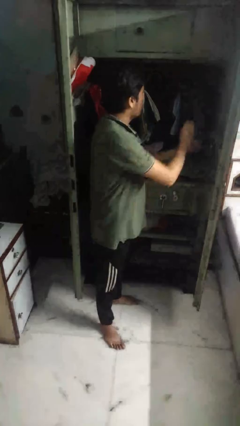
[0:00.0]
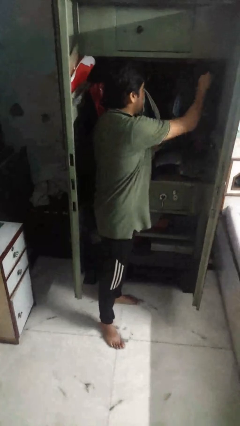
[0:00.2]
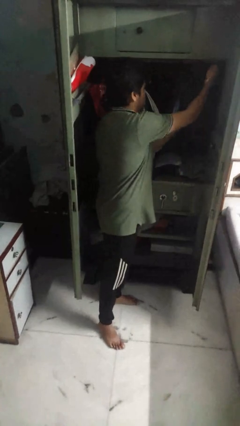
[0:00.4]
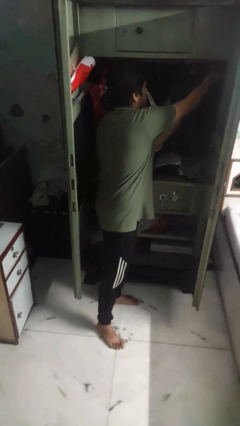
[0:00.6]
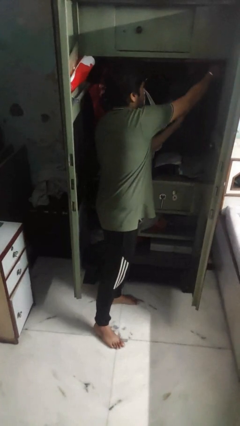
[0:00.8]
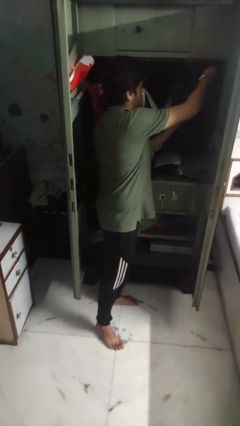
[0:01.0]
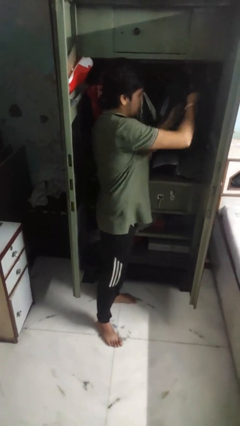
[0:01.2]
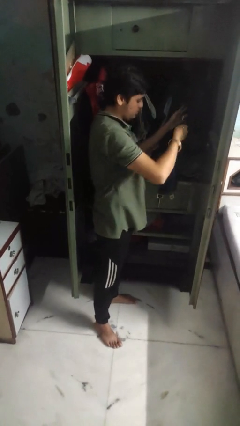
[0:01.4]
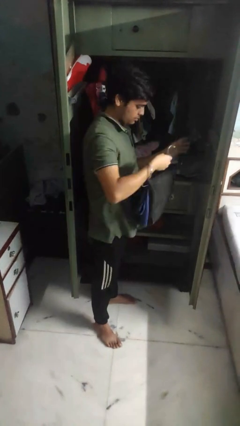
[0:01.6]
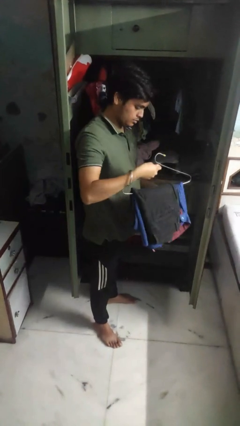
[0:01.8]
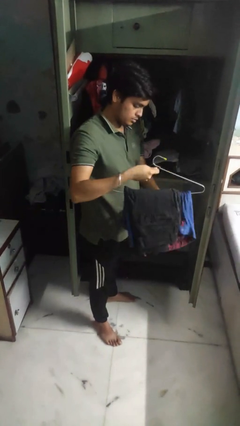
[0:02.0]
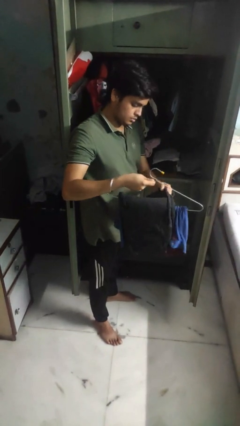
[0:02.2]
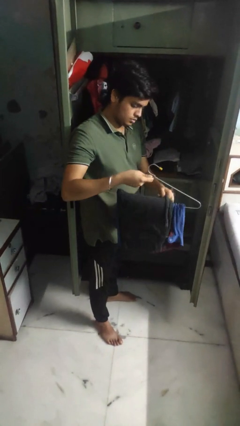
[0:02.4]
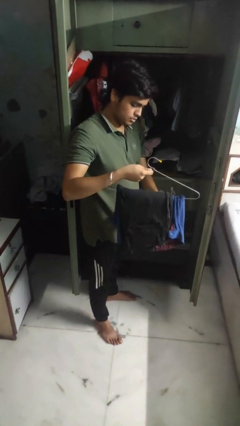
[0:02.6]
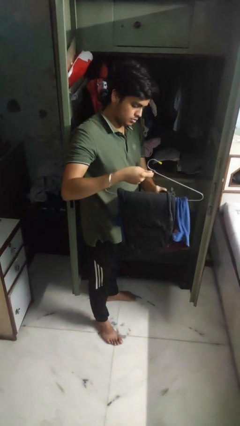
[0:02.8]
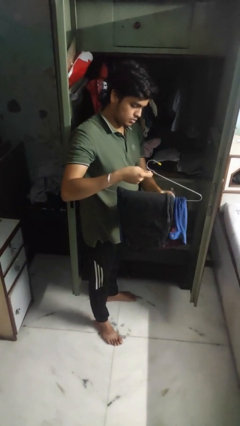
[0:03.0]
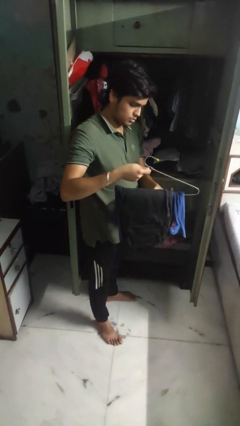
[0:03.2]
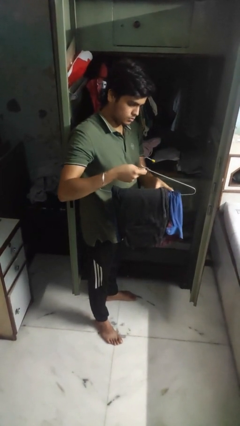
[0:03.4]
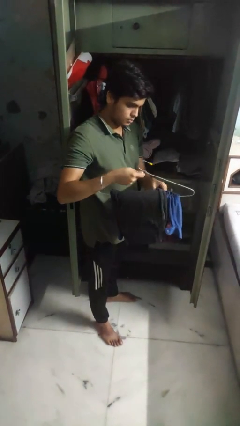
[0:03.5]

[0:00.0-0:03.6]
person takes clothes from closet

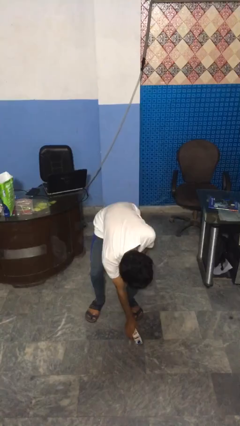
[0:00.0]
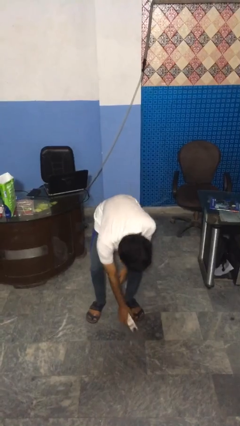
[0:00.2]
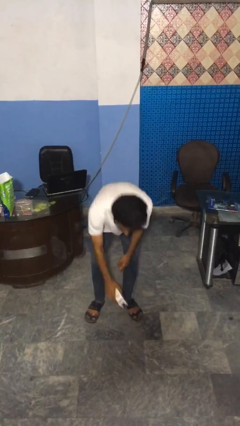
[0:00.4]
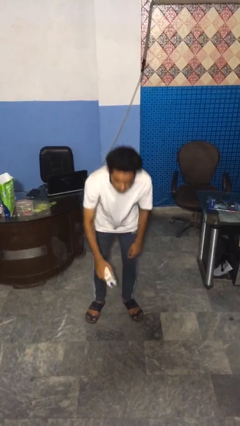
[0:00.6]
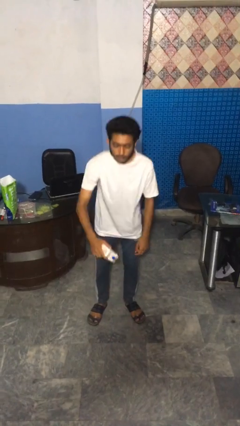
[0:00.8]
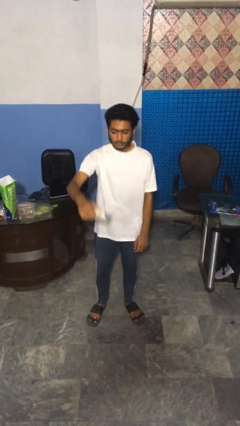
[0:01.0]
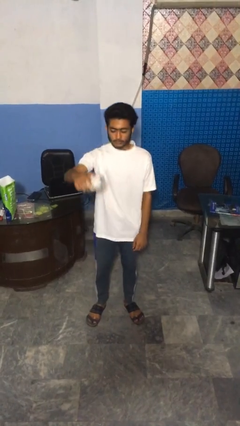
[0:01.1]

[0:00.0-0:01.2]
person picks up object from floor

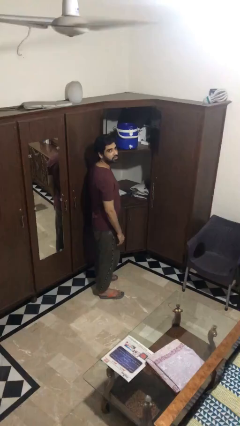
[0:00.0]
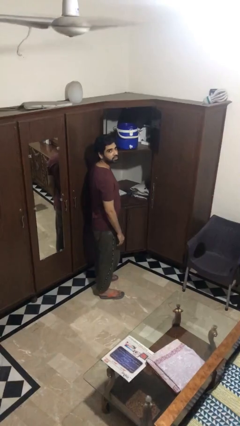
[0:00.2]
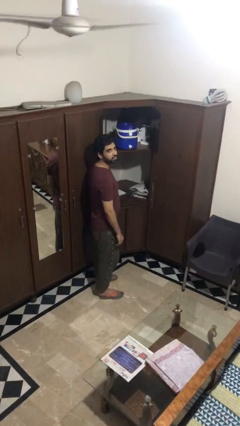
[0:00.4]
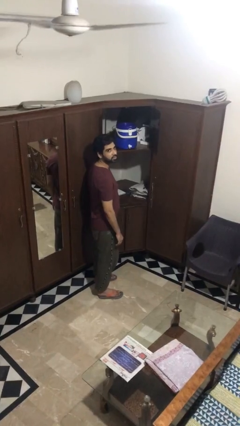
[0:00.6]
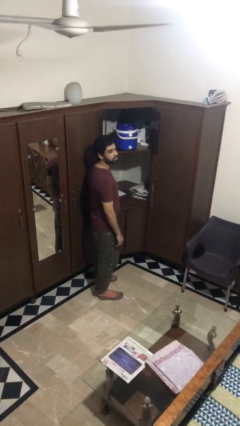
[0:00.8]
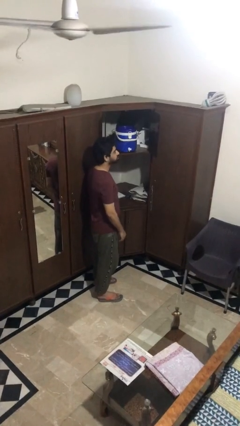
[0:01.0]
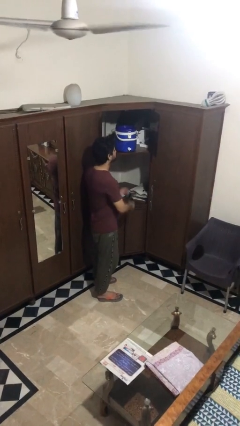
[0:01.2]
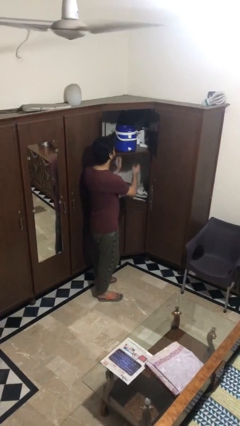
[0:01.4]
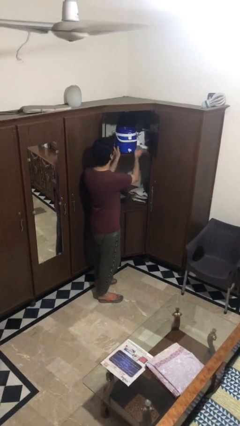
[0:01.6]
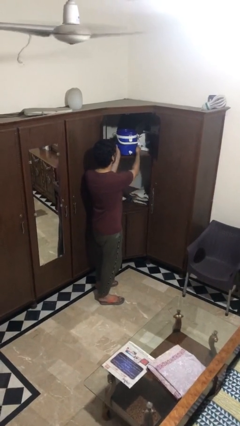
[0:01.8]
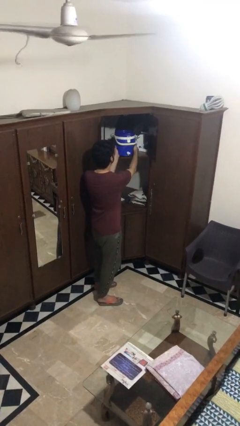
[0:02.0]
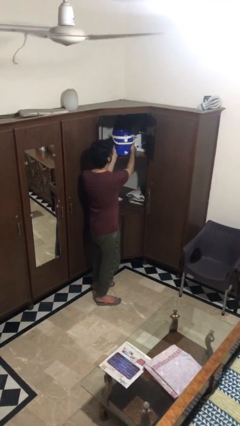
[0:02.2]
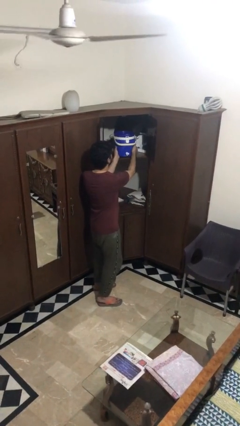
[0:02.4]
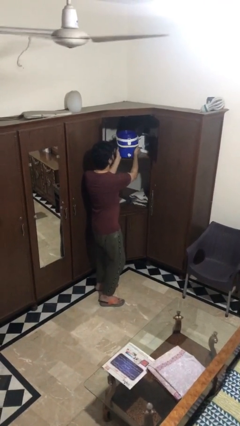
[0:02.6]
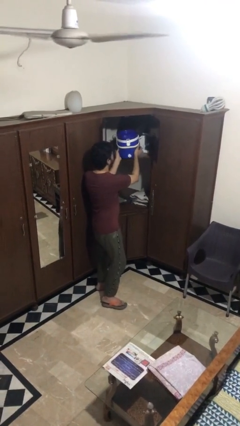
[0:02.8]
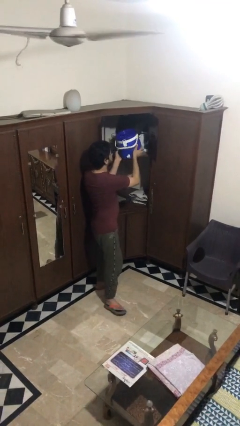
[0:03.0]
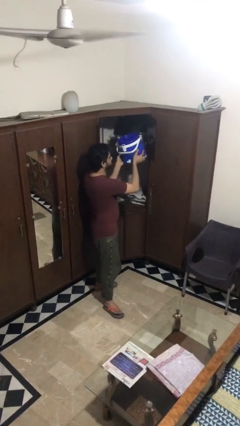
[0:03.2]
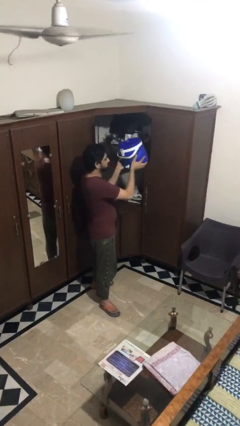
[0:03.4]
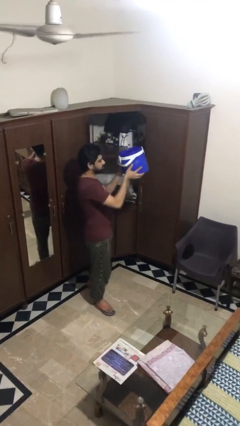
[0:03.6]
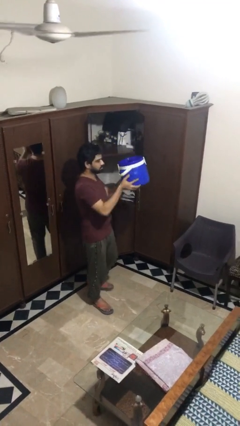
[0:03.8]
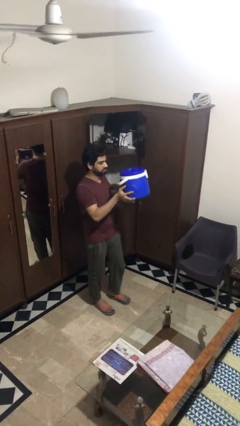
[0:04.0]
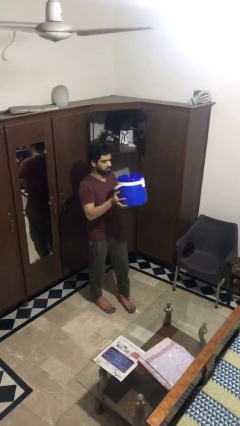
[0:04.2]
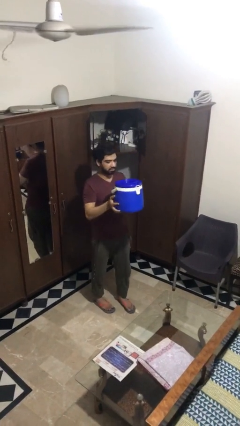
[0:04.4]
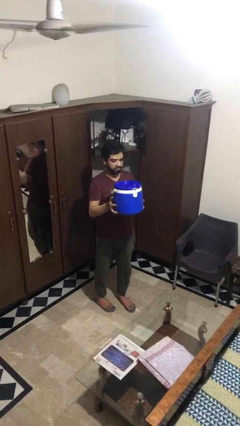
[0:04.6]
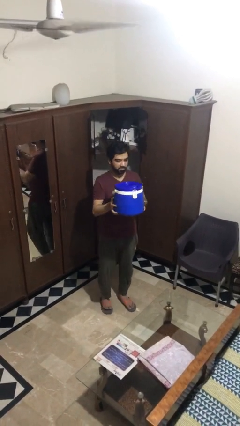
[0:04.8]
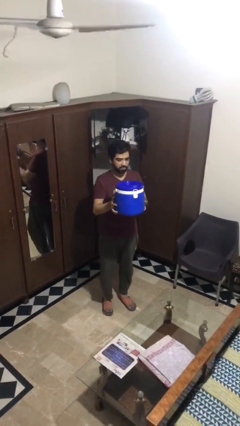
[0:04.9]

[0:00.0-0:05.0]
person picks up object from shelf

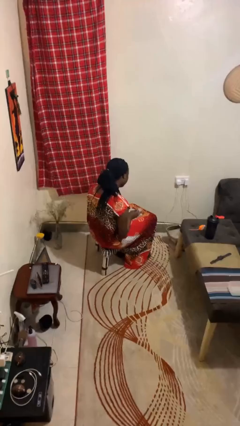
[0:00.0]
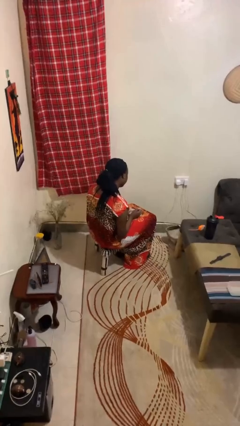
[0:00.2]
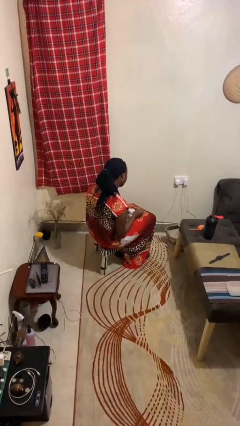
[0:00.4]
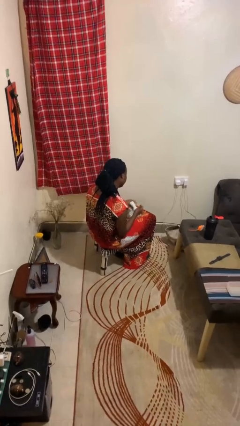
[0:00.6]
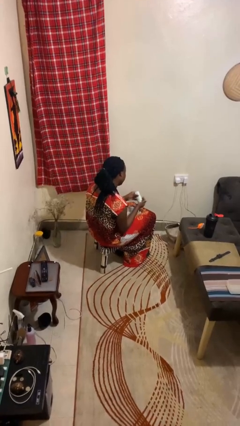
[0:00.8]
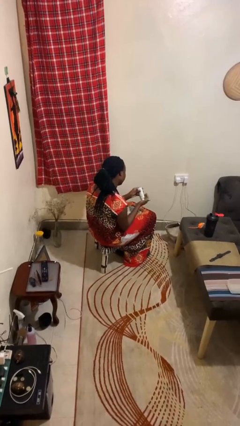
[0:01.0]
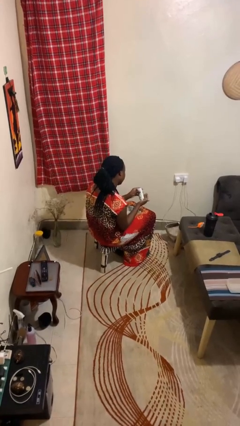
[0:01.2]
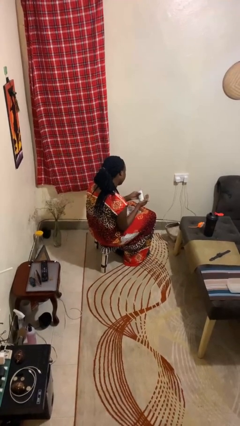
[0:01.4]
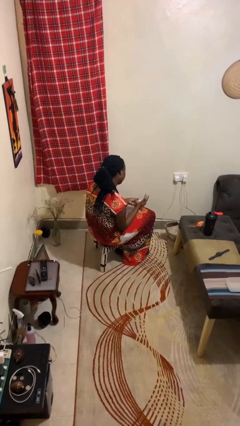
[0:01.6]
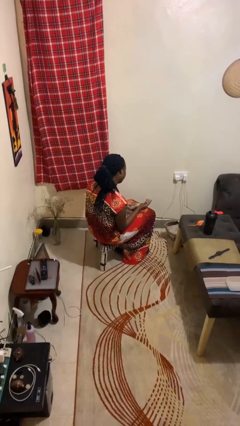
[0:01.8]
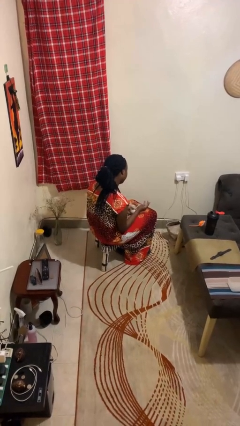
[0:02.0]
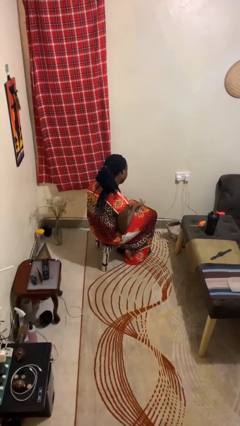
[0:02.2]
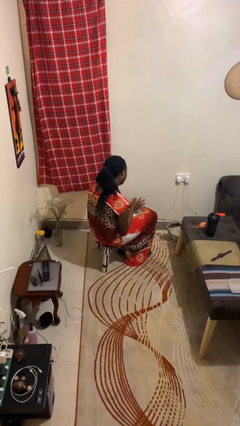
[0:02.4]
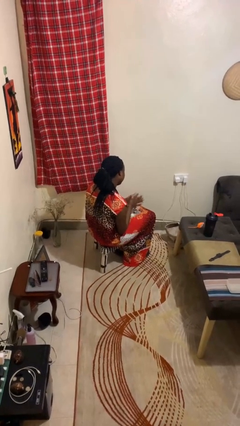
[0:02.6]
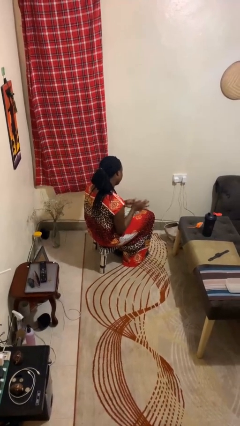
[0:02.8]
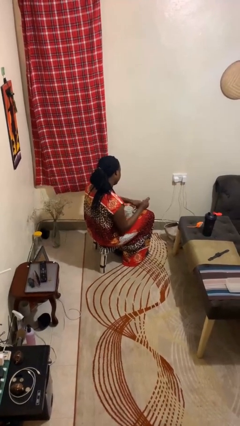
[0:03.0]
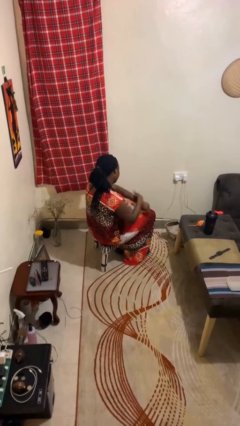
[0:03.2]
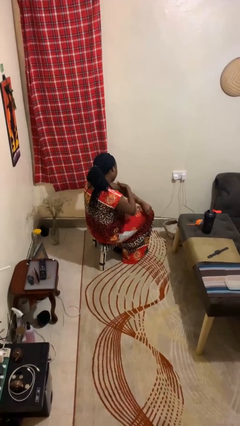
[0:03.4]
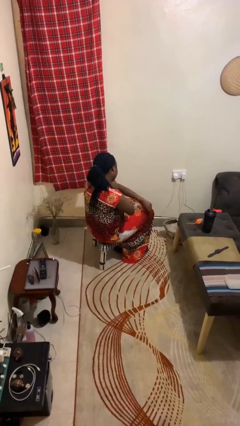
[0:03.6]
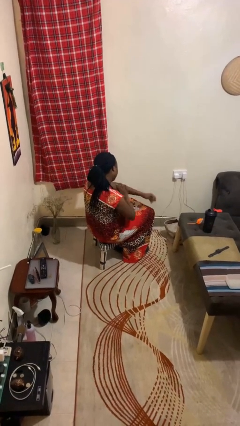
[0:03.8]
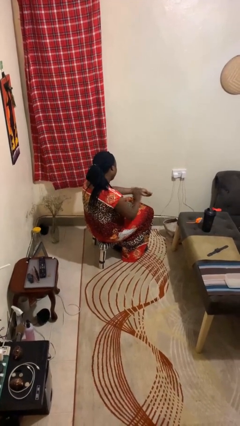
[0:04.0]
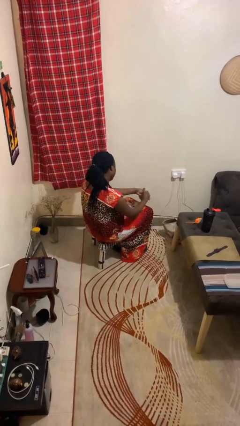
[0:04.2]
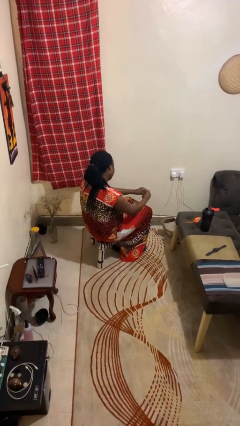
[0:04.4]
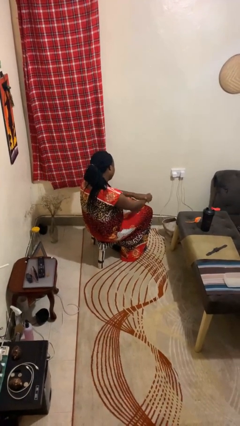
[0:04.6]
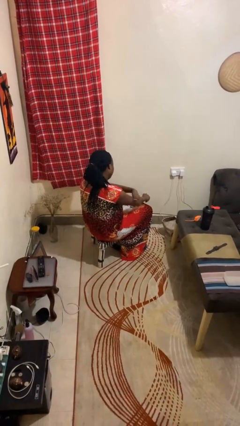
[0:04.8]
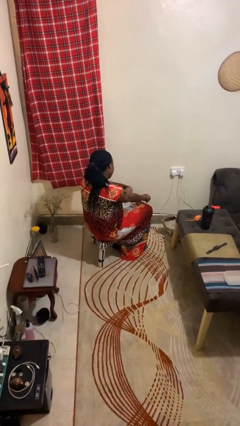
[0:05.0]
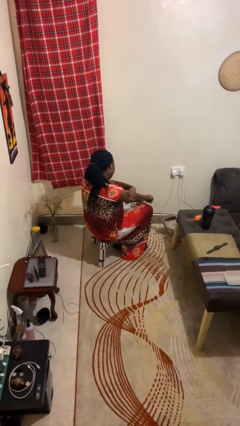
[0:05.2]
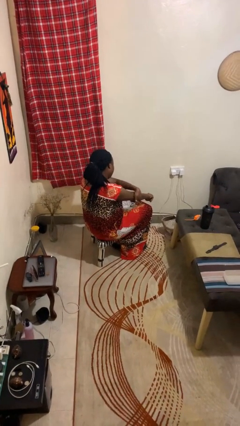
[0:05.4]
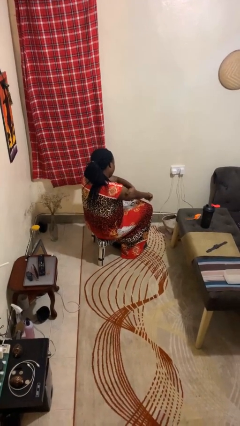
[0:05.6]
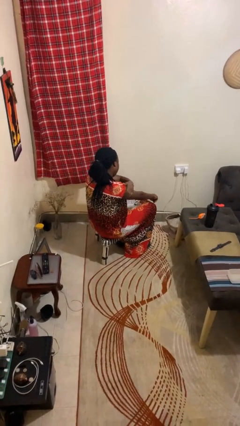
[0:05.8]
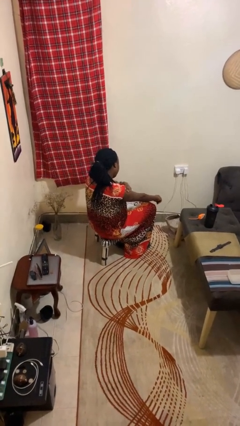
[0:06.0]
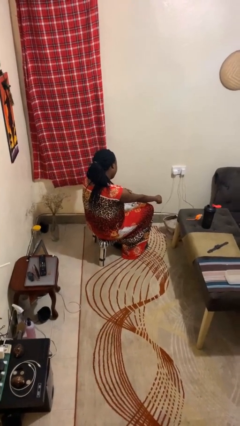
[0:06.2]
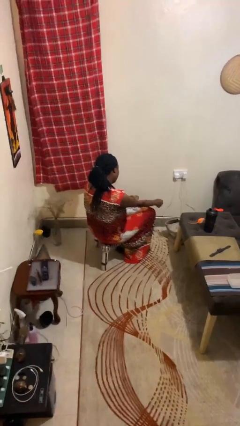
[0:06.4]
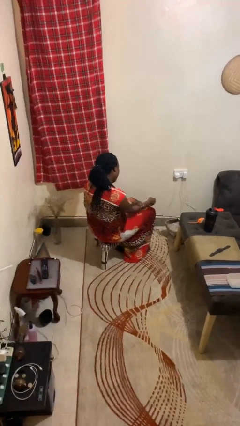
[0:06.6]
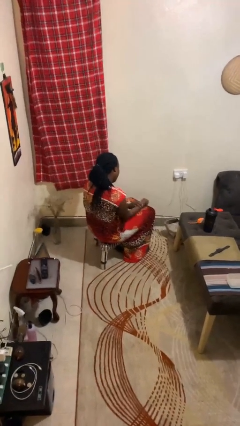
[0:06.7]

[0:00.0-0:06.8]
person applies sunscreen

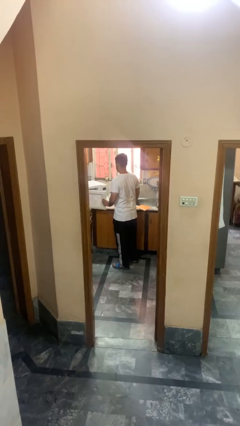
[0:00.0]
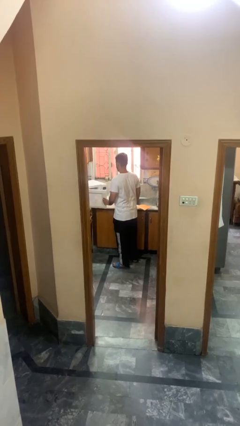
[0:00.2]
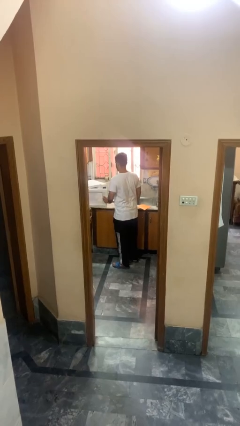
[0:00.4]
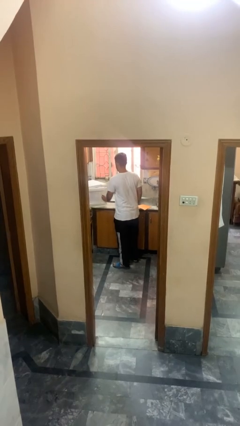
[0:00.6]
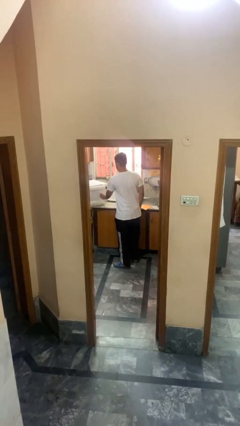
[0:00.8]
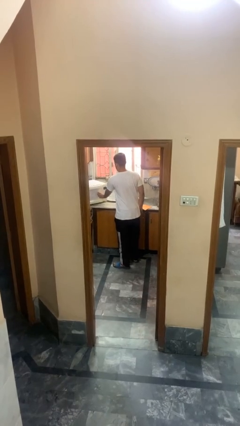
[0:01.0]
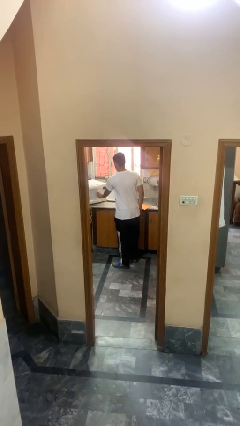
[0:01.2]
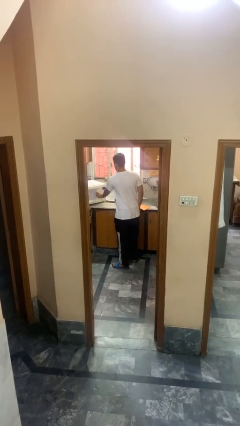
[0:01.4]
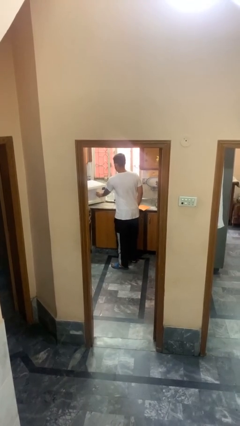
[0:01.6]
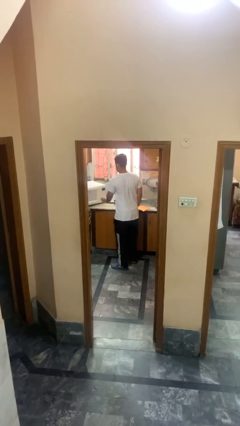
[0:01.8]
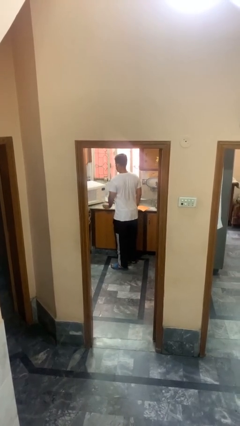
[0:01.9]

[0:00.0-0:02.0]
person closes microwave
